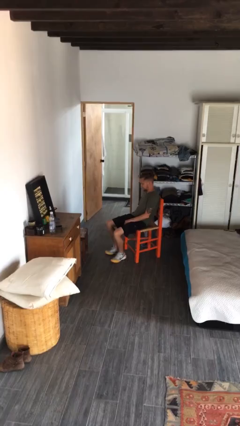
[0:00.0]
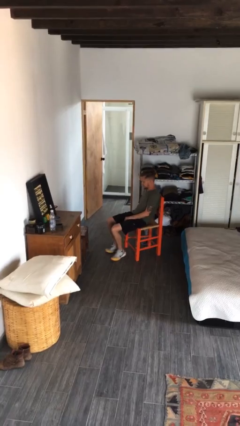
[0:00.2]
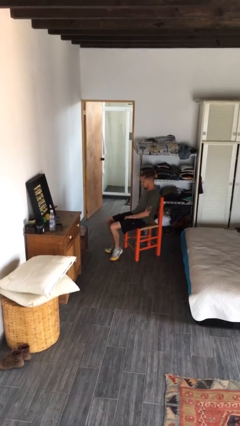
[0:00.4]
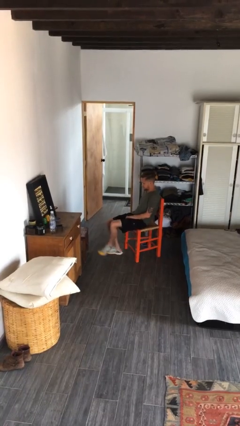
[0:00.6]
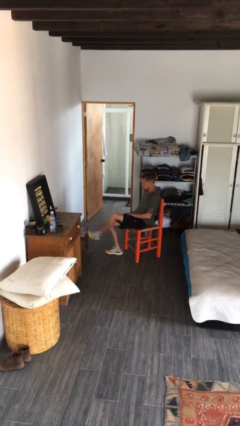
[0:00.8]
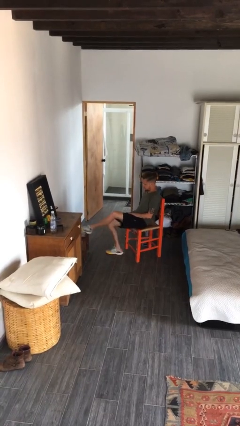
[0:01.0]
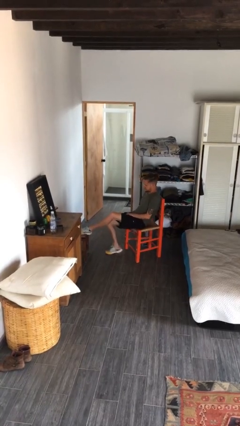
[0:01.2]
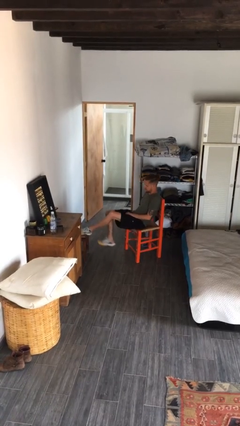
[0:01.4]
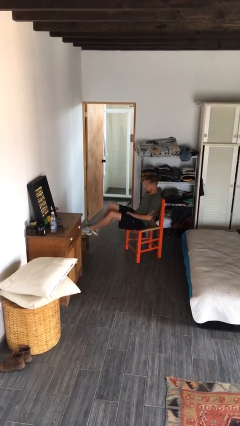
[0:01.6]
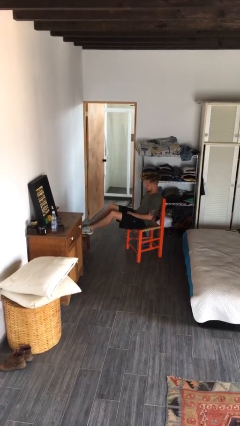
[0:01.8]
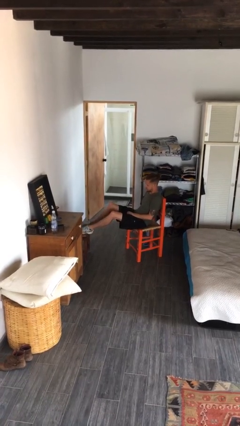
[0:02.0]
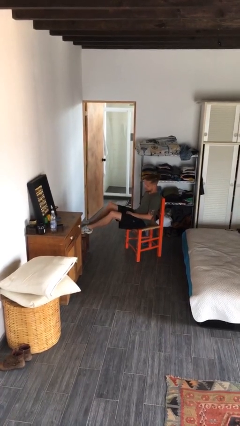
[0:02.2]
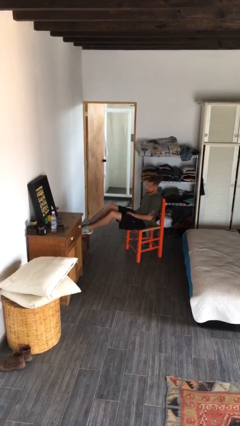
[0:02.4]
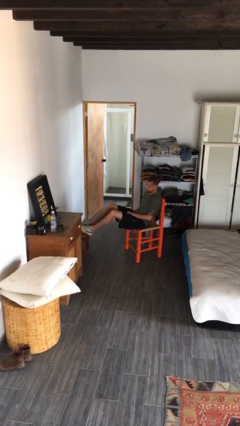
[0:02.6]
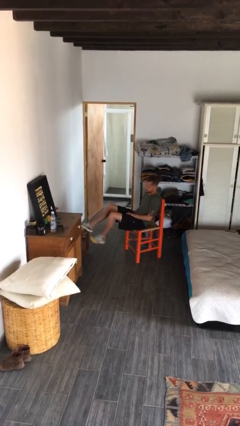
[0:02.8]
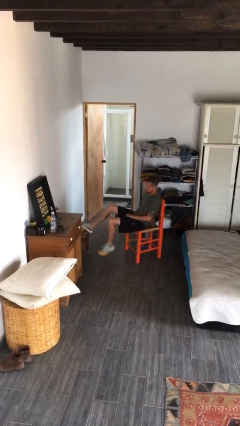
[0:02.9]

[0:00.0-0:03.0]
person puts feet up

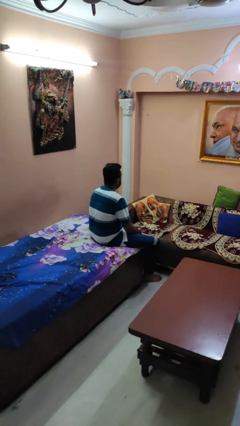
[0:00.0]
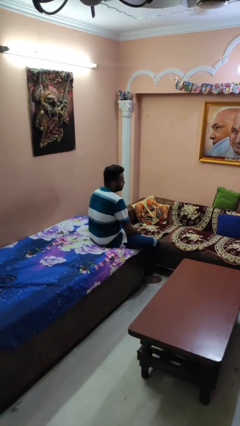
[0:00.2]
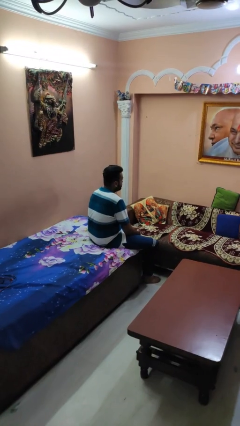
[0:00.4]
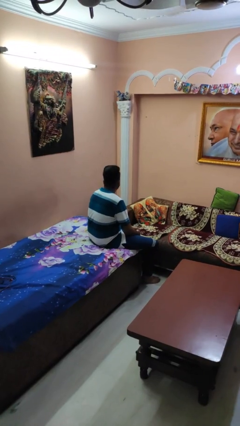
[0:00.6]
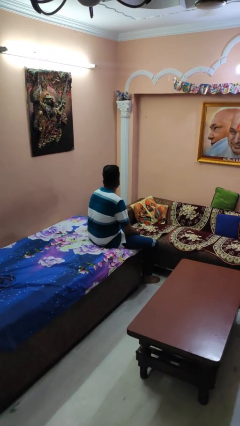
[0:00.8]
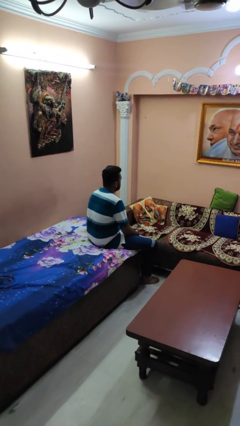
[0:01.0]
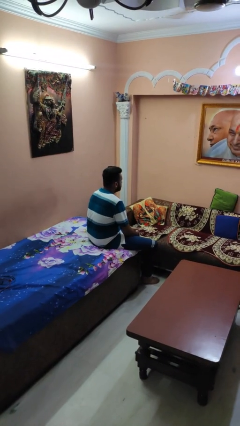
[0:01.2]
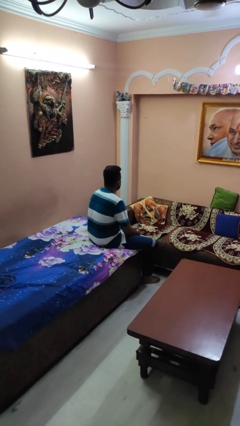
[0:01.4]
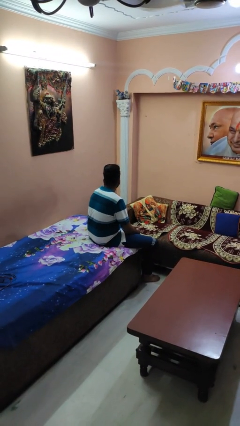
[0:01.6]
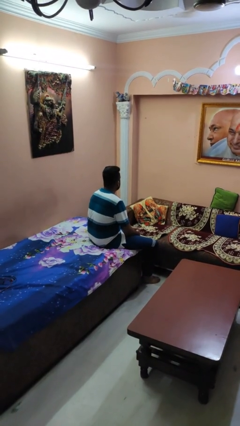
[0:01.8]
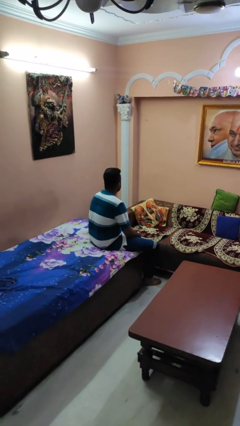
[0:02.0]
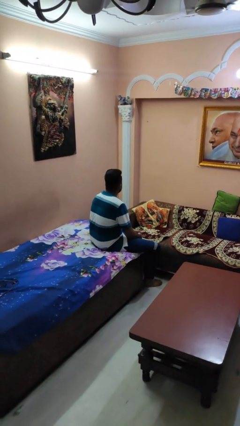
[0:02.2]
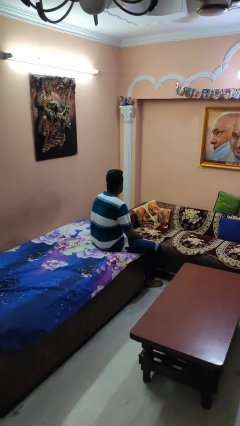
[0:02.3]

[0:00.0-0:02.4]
person shakes head

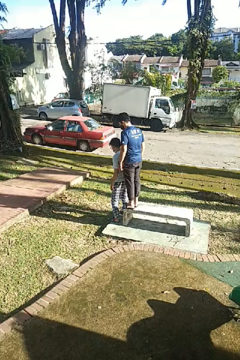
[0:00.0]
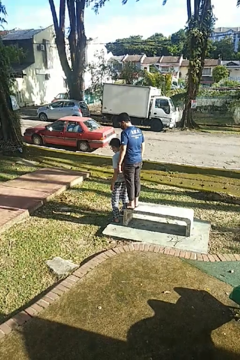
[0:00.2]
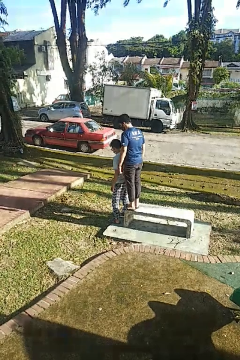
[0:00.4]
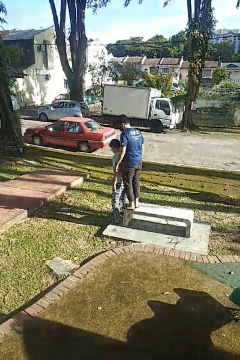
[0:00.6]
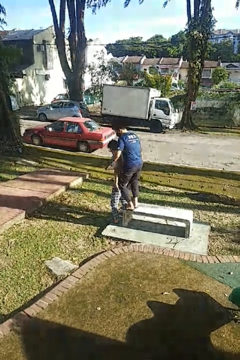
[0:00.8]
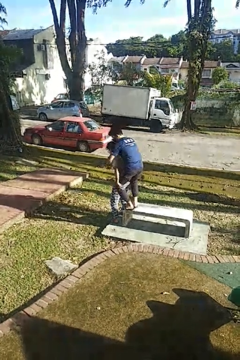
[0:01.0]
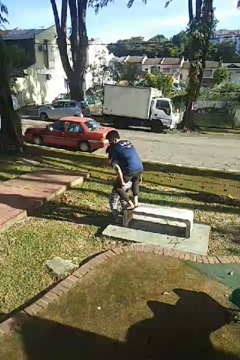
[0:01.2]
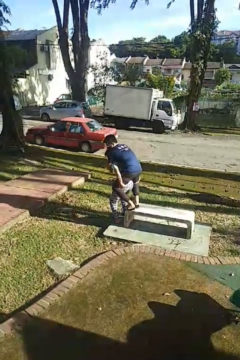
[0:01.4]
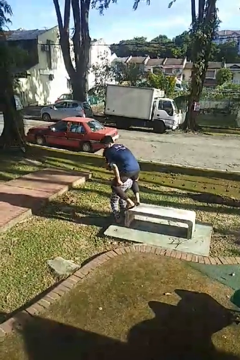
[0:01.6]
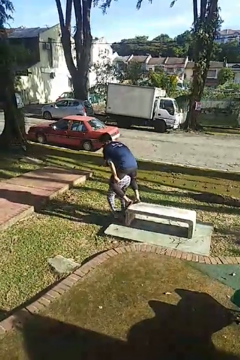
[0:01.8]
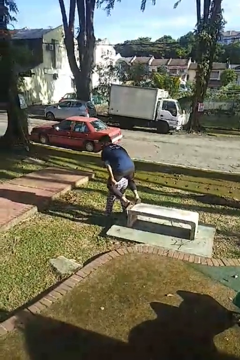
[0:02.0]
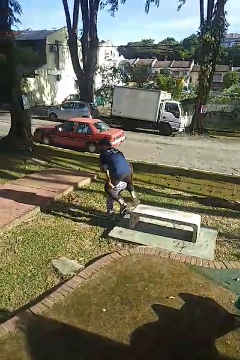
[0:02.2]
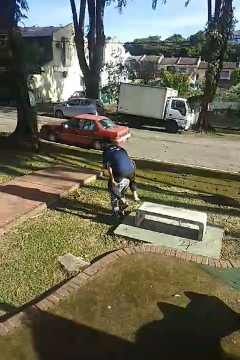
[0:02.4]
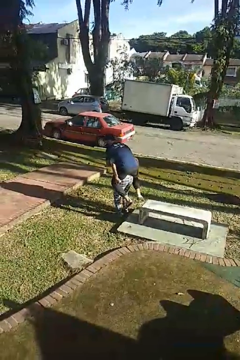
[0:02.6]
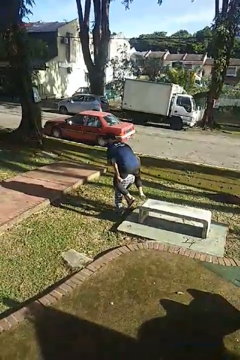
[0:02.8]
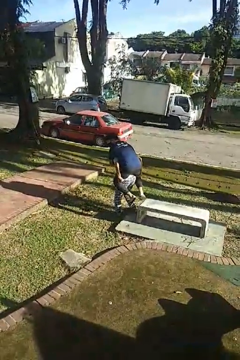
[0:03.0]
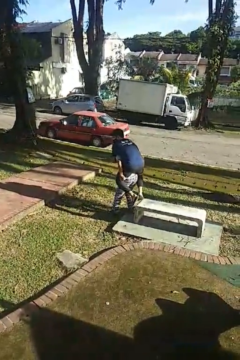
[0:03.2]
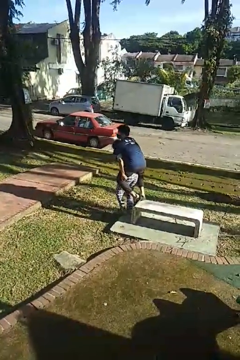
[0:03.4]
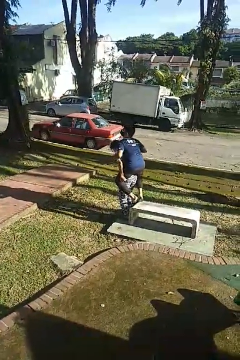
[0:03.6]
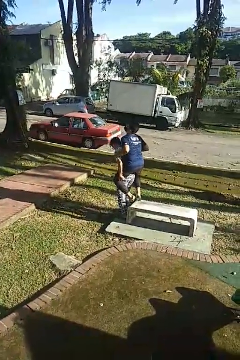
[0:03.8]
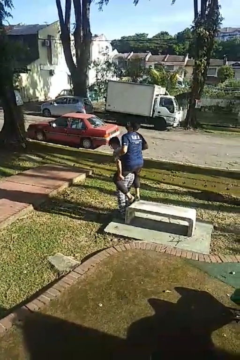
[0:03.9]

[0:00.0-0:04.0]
person carries person on back

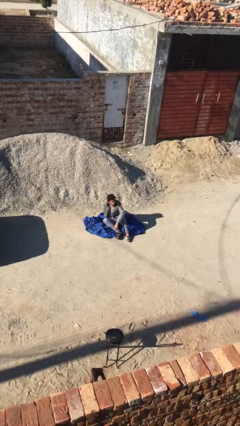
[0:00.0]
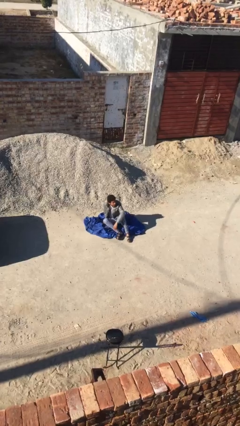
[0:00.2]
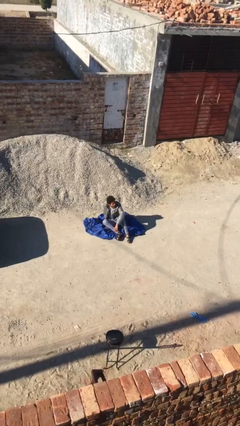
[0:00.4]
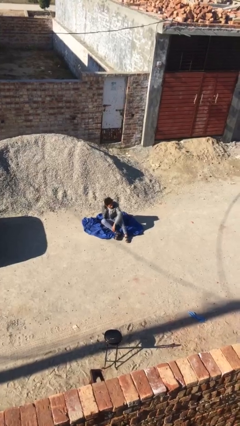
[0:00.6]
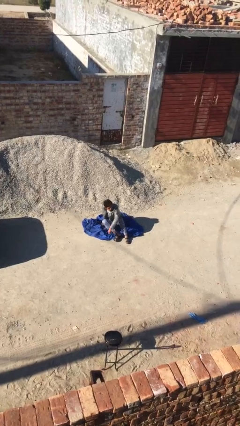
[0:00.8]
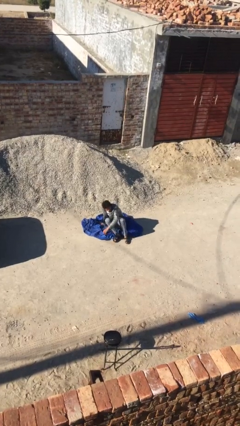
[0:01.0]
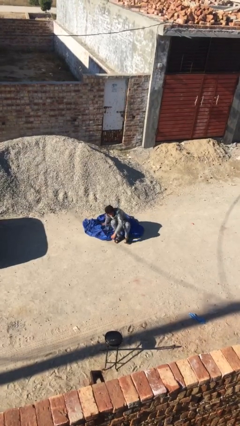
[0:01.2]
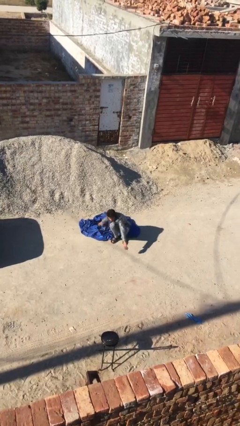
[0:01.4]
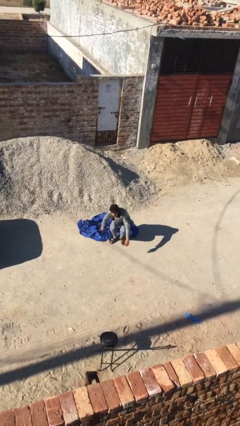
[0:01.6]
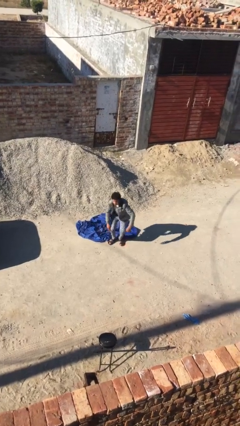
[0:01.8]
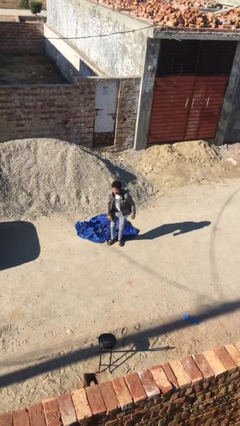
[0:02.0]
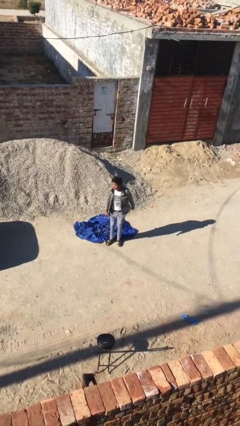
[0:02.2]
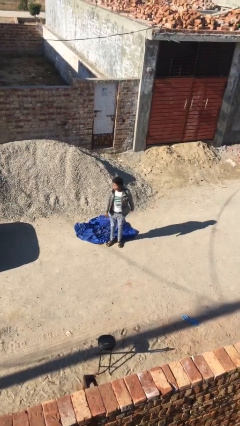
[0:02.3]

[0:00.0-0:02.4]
person stands up

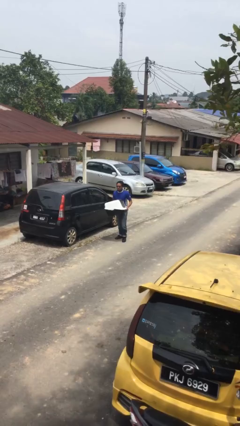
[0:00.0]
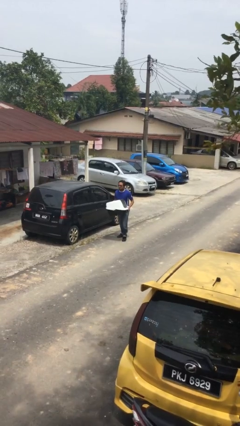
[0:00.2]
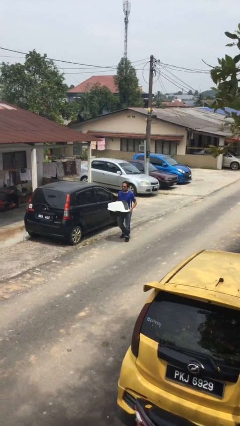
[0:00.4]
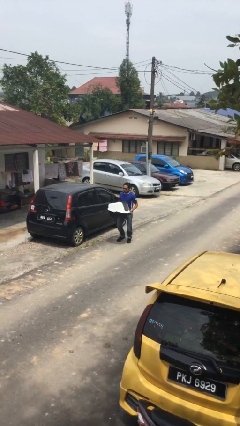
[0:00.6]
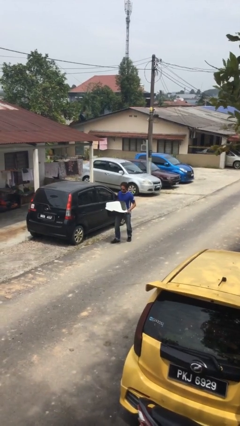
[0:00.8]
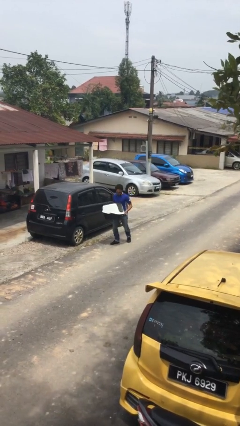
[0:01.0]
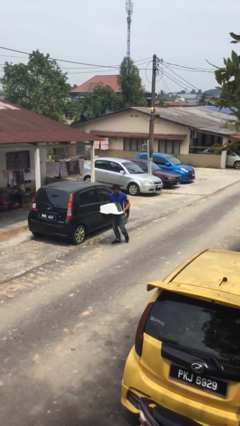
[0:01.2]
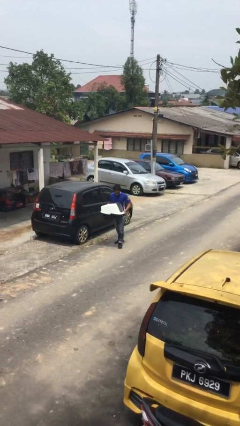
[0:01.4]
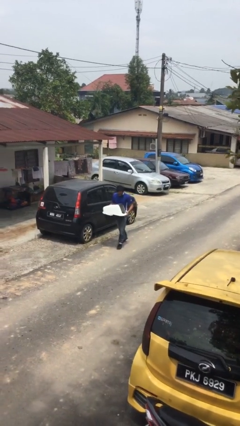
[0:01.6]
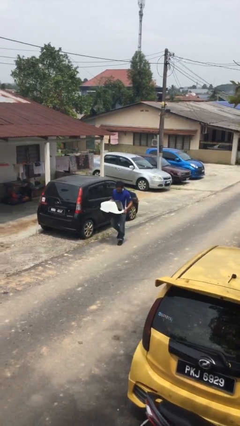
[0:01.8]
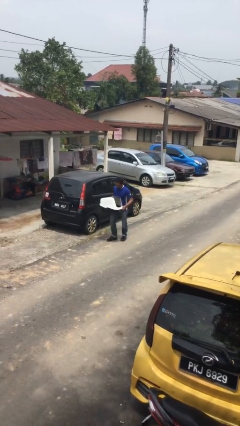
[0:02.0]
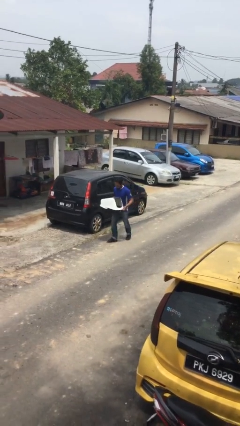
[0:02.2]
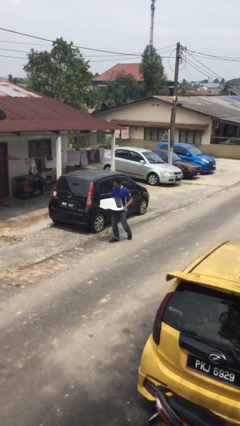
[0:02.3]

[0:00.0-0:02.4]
person carries heavy object

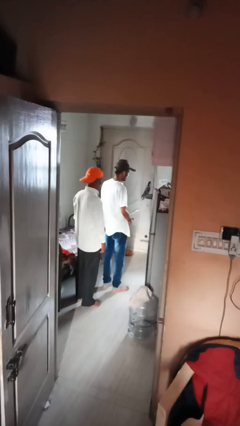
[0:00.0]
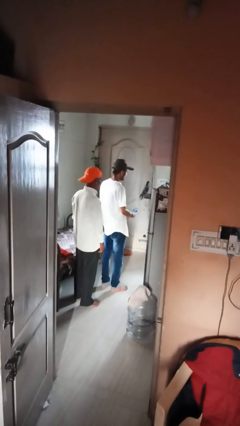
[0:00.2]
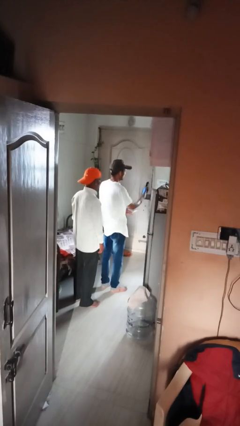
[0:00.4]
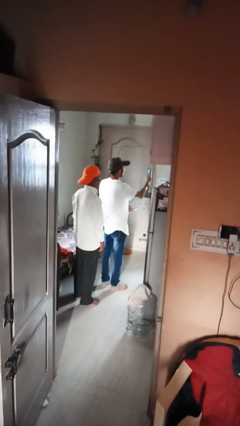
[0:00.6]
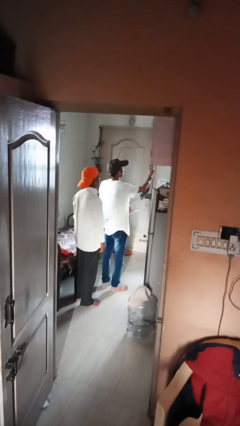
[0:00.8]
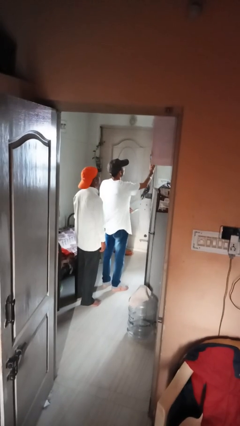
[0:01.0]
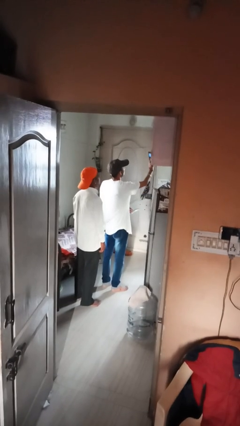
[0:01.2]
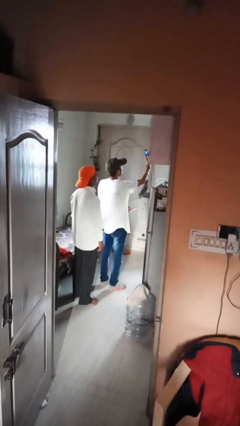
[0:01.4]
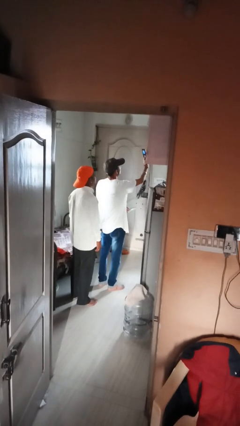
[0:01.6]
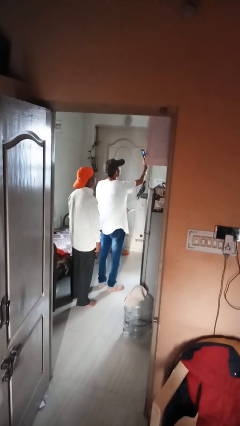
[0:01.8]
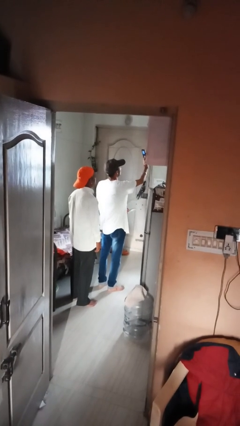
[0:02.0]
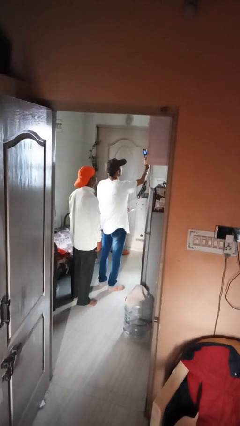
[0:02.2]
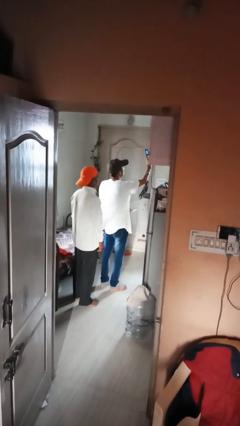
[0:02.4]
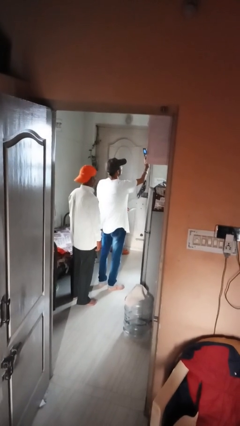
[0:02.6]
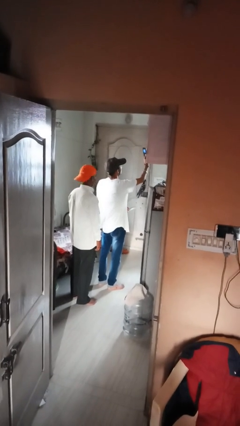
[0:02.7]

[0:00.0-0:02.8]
person takes selfie with person

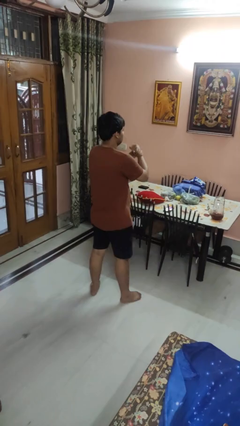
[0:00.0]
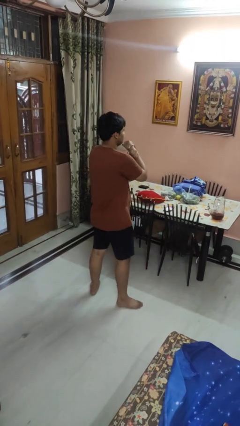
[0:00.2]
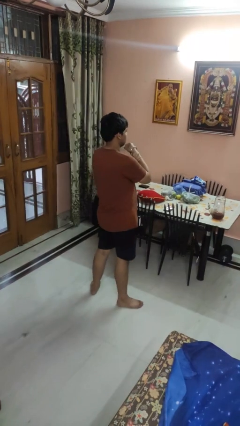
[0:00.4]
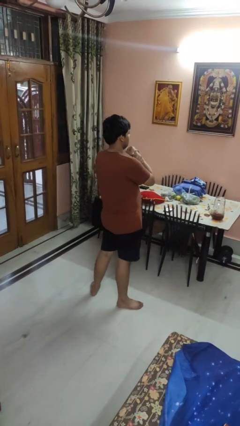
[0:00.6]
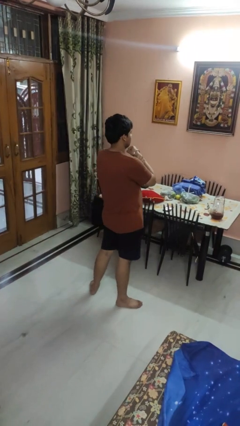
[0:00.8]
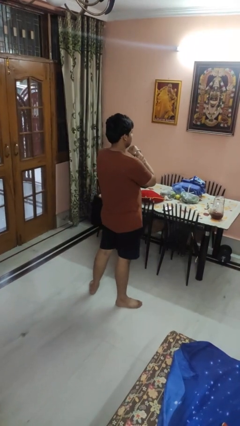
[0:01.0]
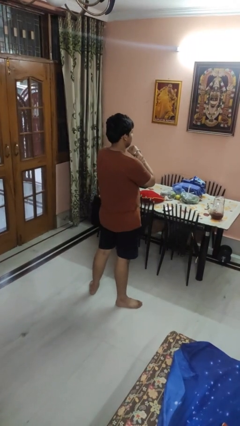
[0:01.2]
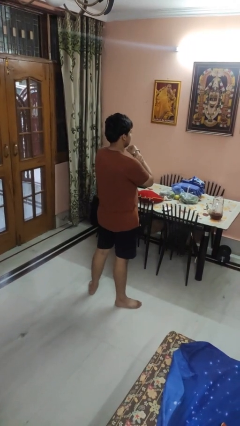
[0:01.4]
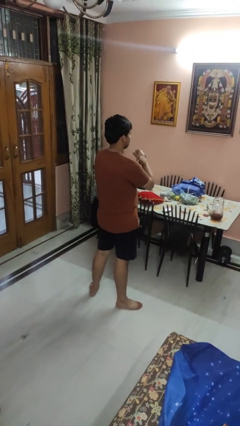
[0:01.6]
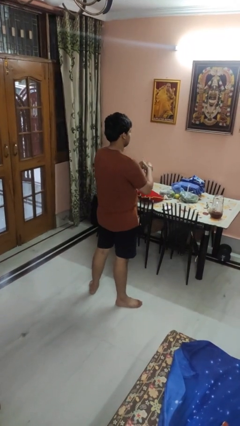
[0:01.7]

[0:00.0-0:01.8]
person gestures arms x
